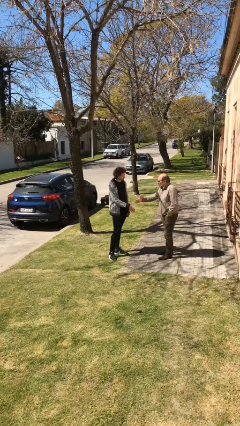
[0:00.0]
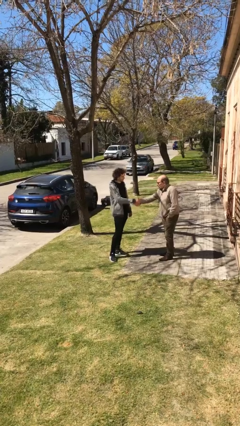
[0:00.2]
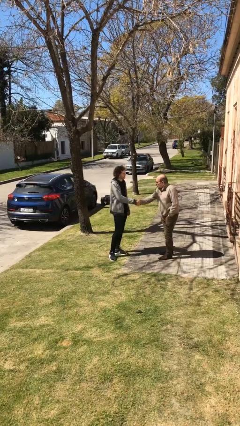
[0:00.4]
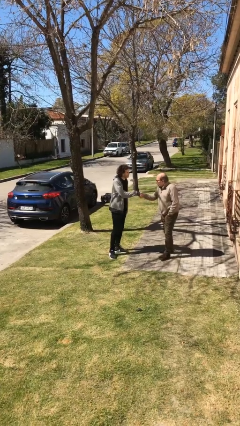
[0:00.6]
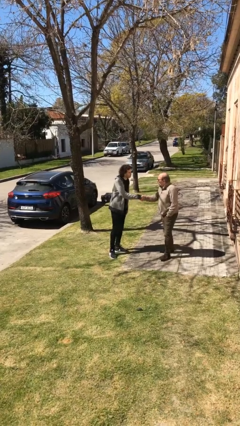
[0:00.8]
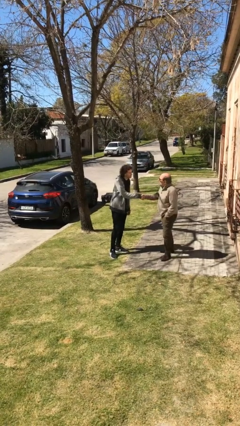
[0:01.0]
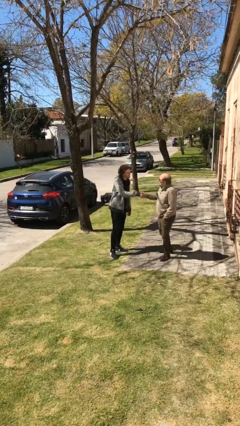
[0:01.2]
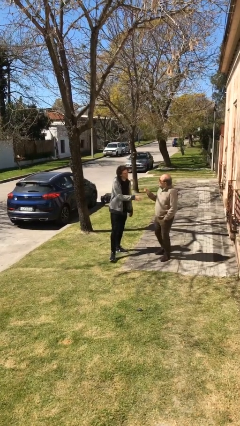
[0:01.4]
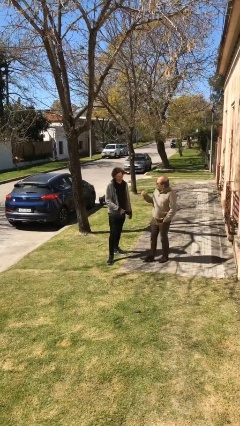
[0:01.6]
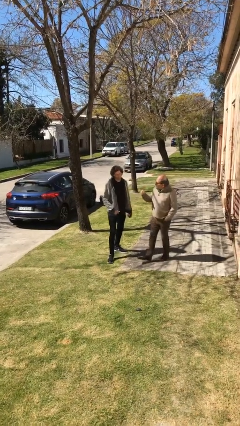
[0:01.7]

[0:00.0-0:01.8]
person shakes hand

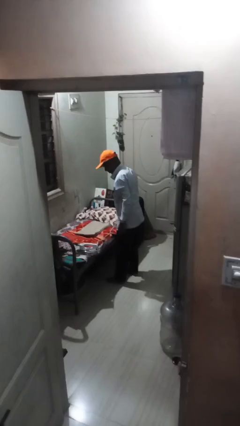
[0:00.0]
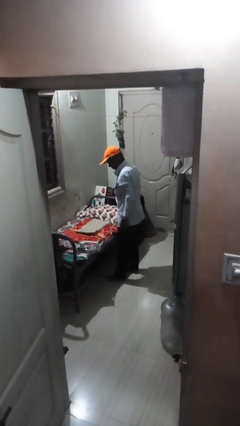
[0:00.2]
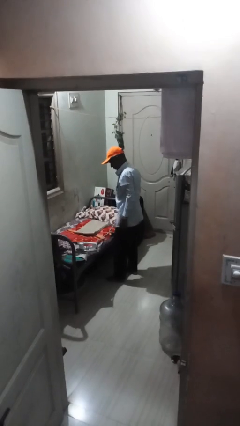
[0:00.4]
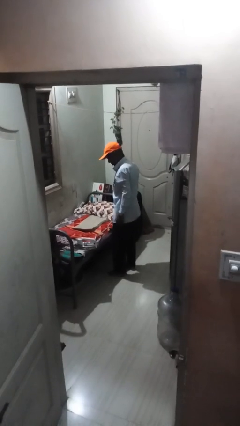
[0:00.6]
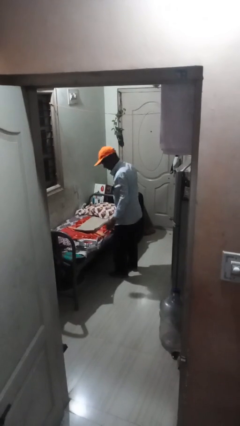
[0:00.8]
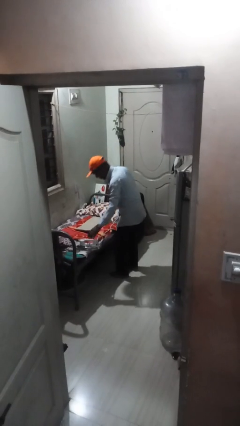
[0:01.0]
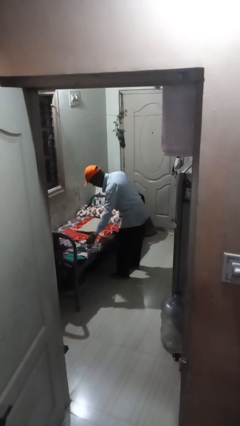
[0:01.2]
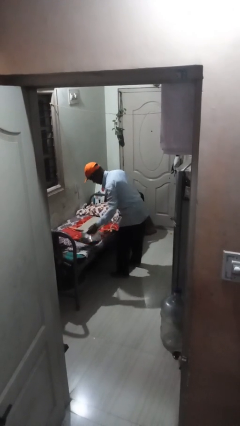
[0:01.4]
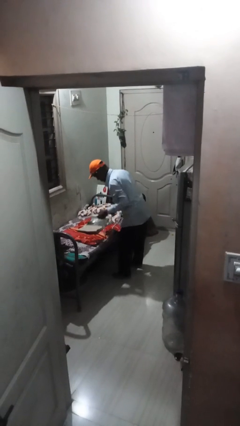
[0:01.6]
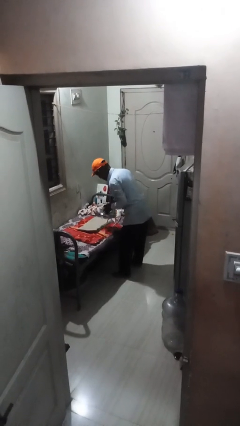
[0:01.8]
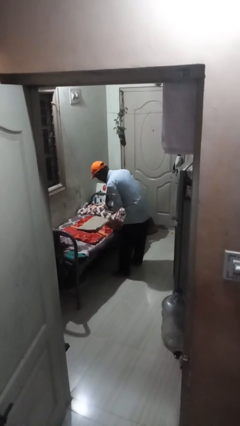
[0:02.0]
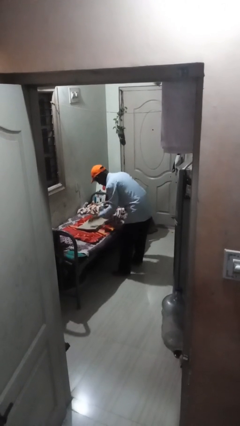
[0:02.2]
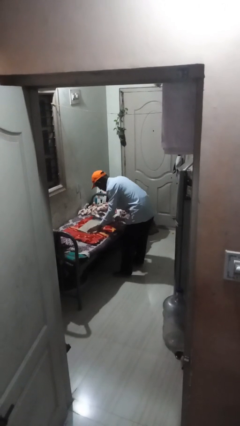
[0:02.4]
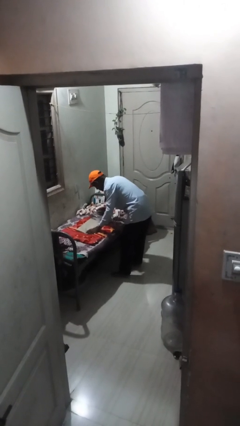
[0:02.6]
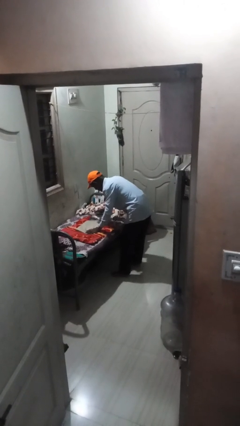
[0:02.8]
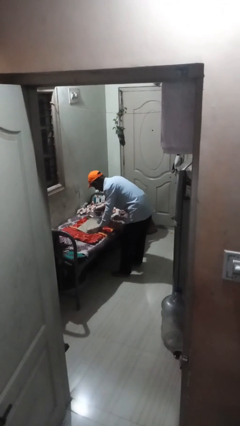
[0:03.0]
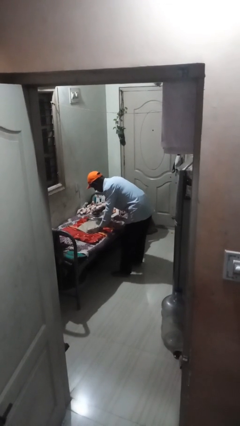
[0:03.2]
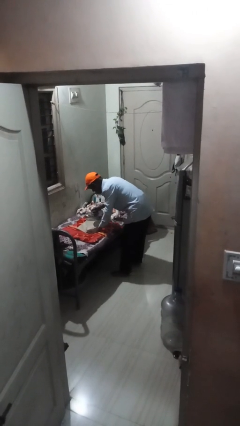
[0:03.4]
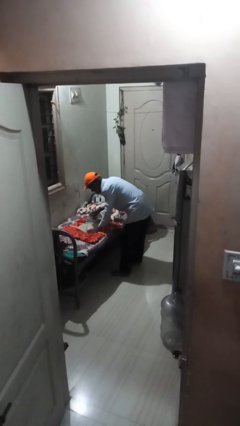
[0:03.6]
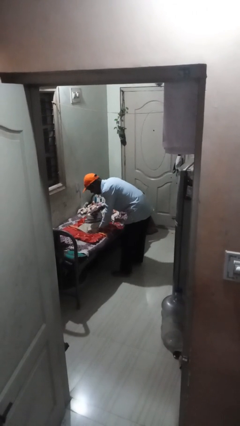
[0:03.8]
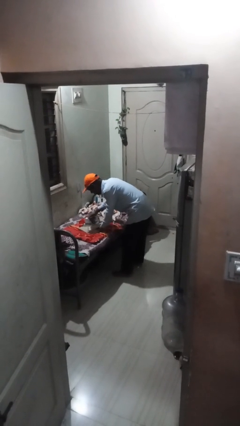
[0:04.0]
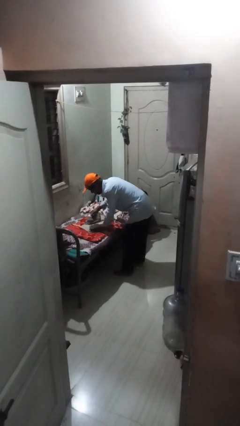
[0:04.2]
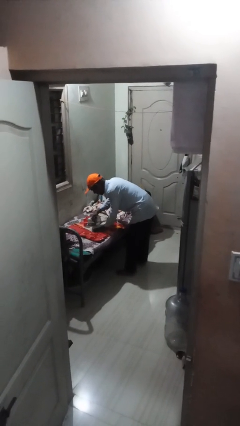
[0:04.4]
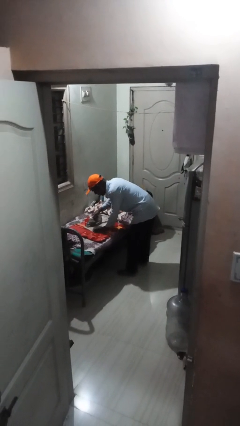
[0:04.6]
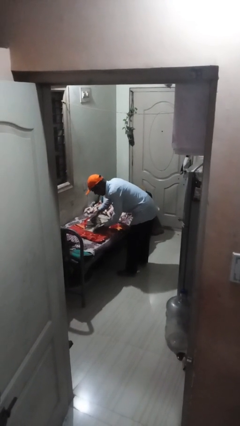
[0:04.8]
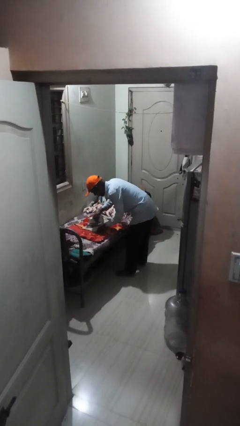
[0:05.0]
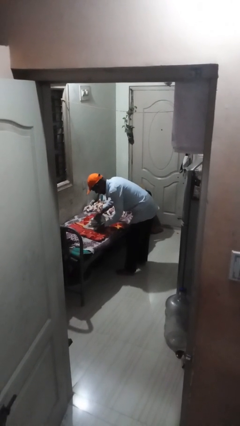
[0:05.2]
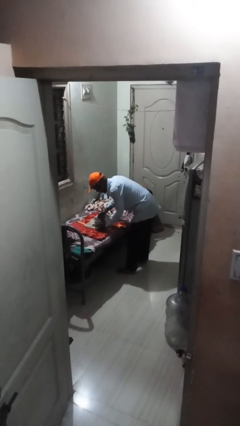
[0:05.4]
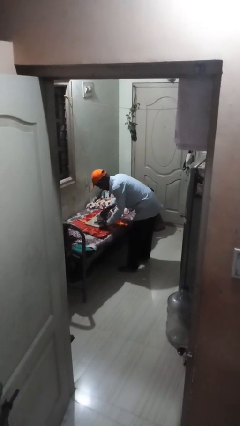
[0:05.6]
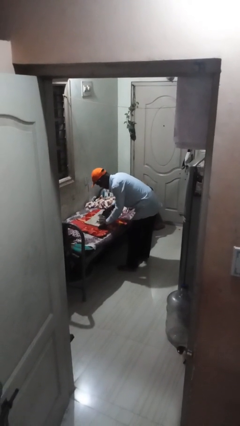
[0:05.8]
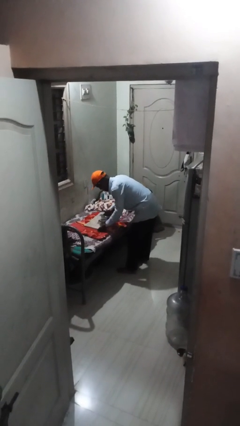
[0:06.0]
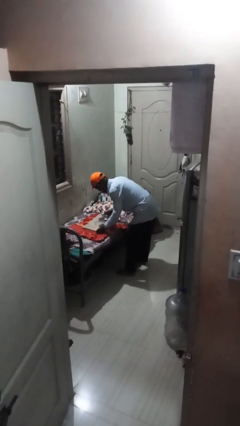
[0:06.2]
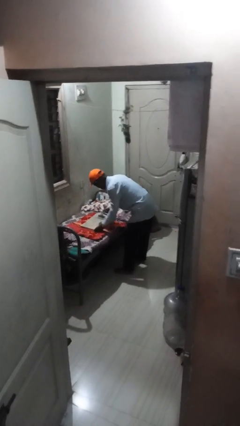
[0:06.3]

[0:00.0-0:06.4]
person irons clothes

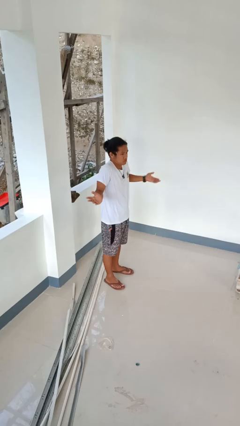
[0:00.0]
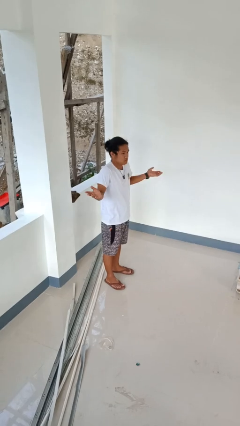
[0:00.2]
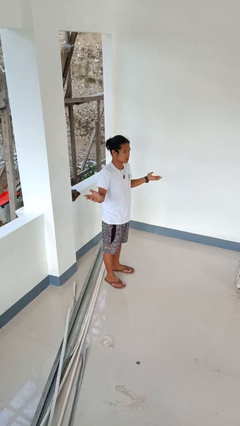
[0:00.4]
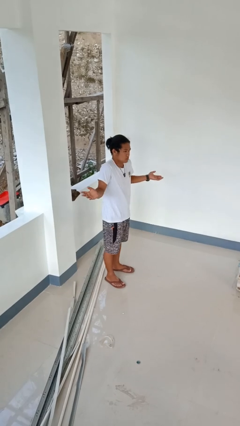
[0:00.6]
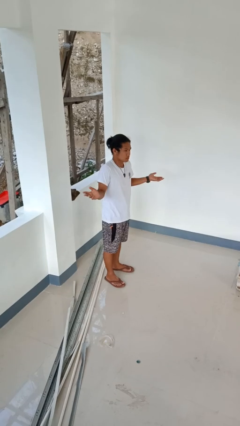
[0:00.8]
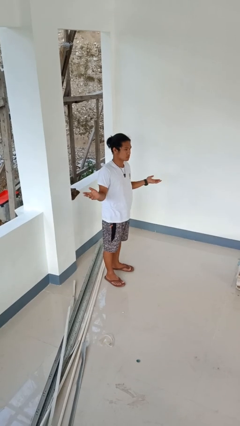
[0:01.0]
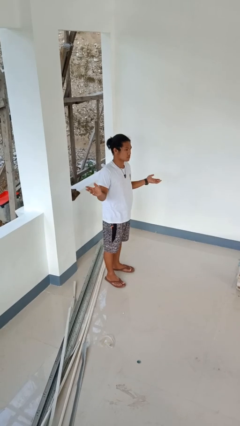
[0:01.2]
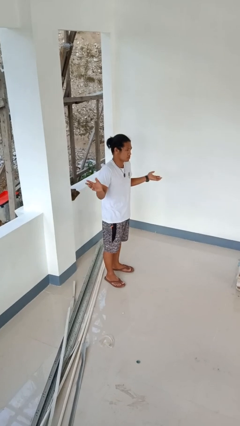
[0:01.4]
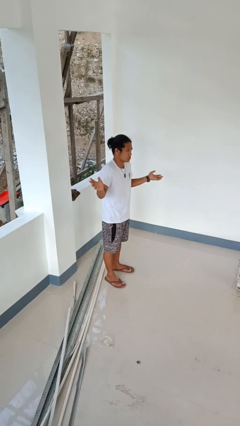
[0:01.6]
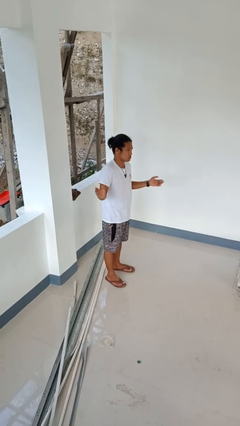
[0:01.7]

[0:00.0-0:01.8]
person shrugs

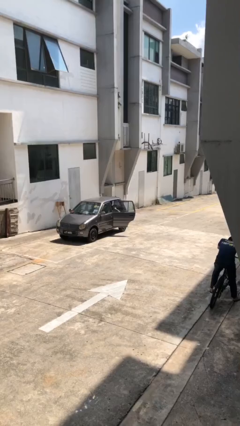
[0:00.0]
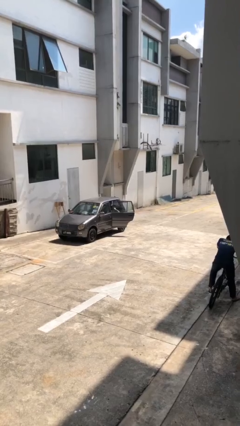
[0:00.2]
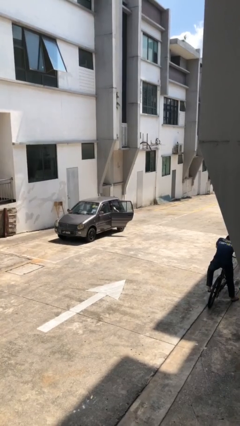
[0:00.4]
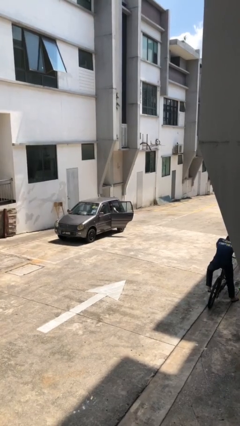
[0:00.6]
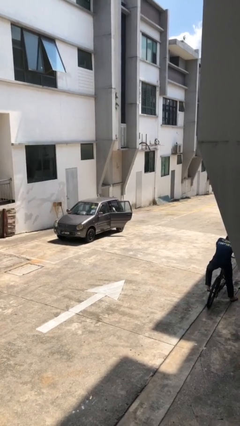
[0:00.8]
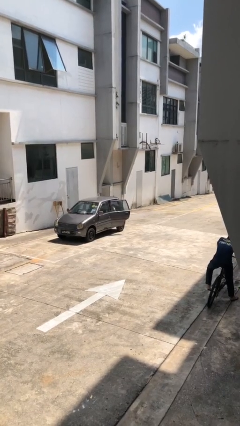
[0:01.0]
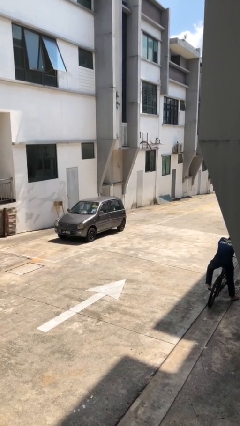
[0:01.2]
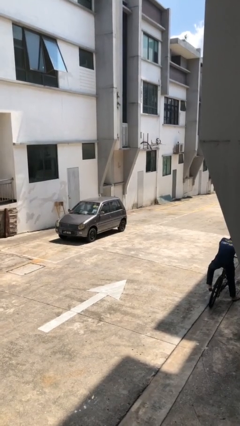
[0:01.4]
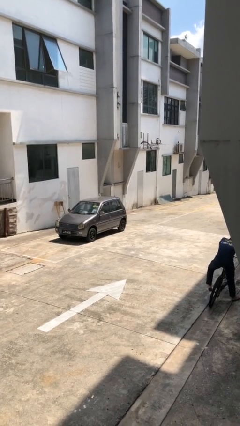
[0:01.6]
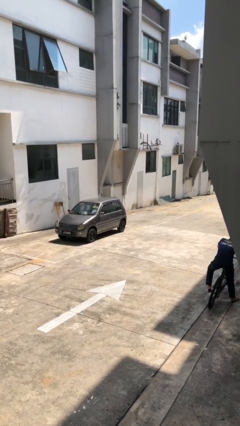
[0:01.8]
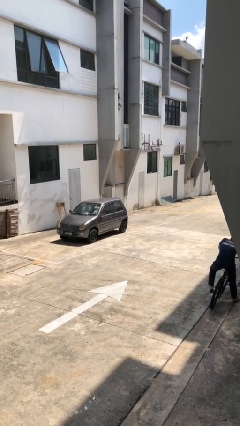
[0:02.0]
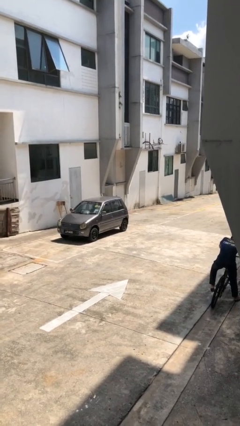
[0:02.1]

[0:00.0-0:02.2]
person closes car door

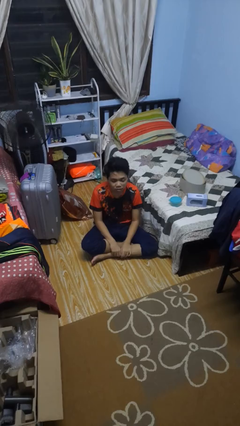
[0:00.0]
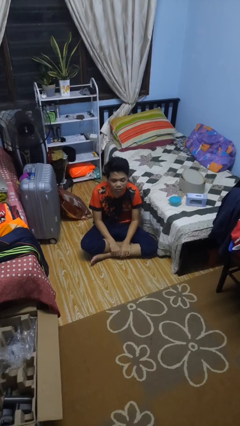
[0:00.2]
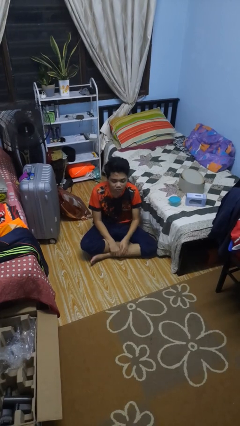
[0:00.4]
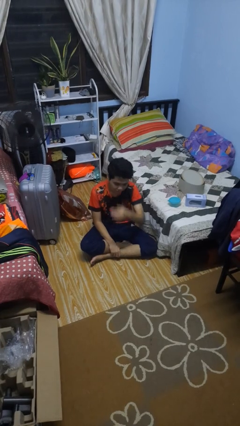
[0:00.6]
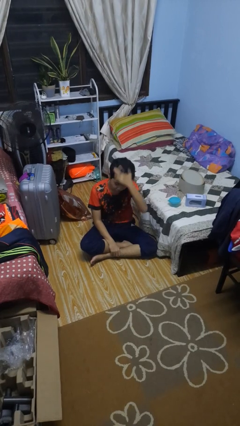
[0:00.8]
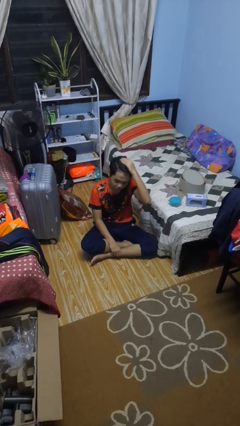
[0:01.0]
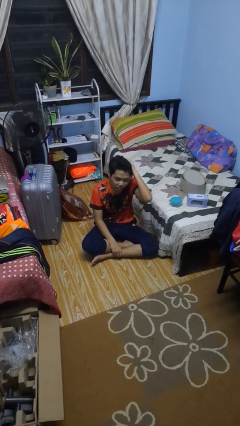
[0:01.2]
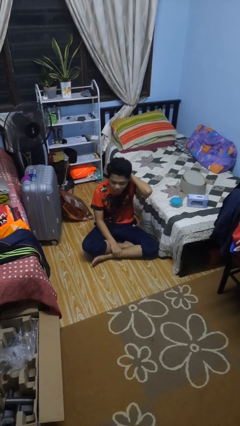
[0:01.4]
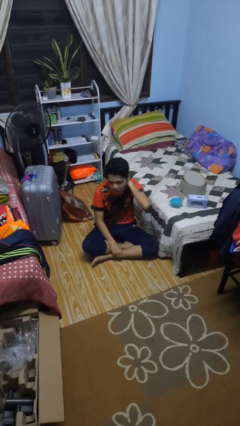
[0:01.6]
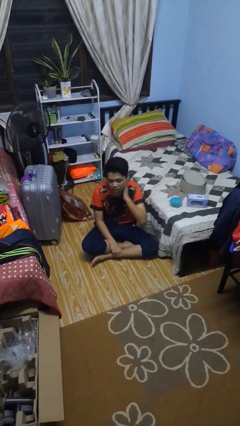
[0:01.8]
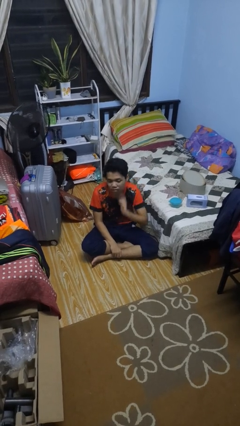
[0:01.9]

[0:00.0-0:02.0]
person strokes hair

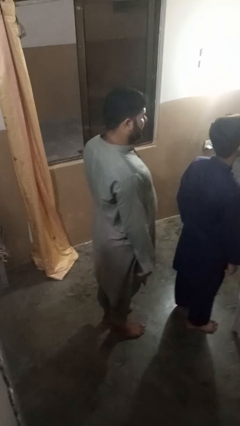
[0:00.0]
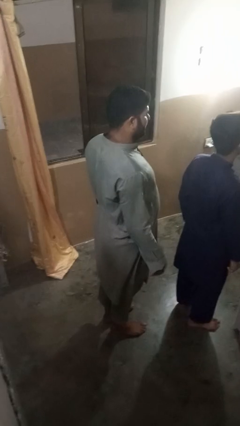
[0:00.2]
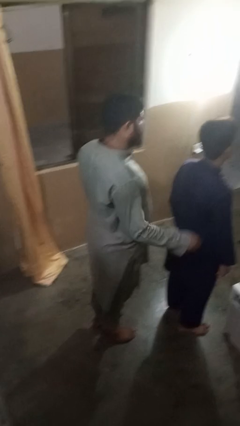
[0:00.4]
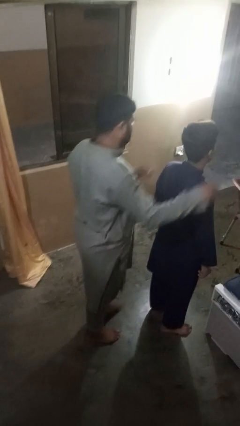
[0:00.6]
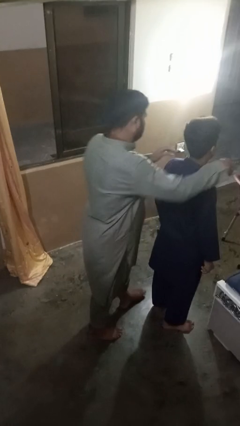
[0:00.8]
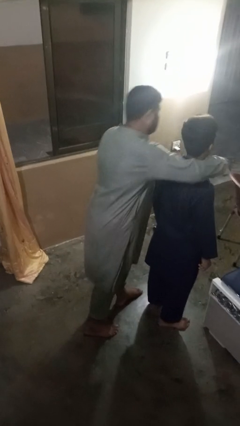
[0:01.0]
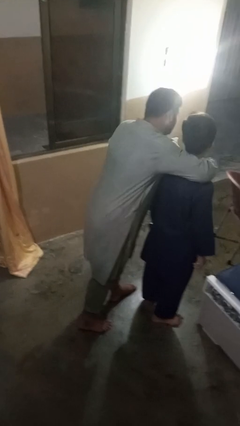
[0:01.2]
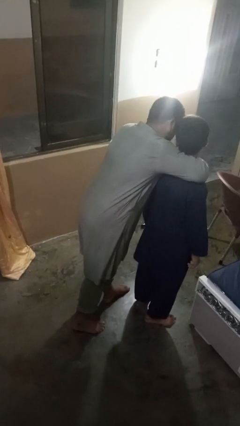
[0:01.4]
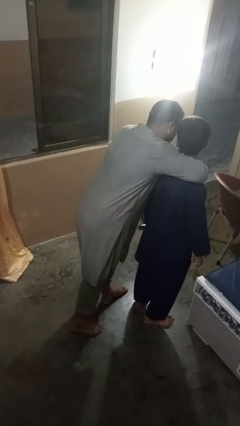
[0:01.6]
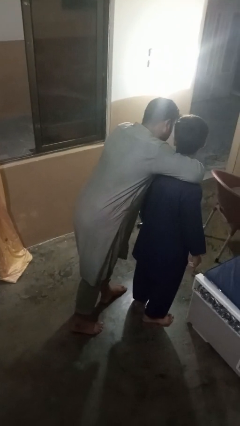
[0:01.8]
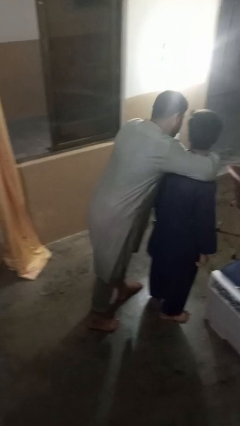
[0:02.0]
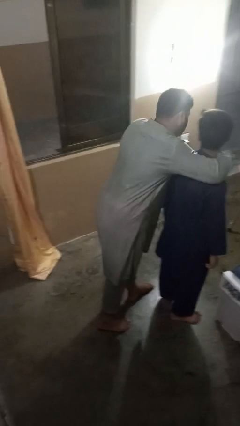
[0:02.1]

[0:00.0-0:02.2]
person hugs person from behind

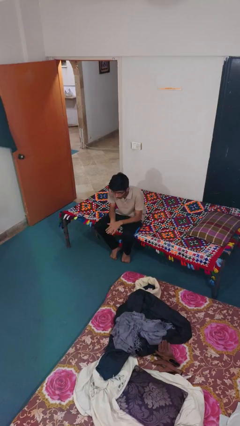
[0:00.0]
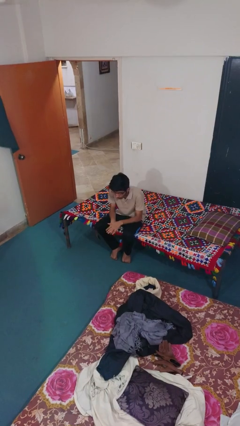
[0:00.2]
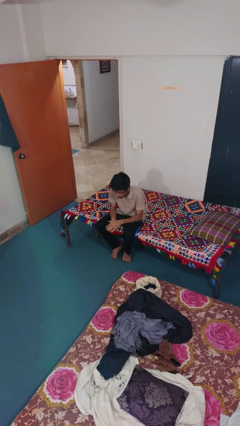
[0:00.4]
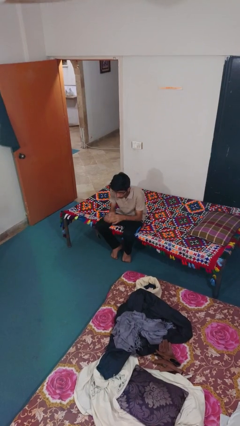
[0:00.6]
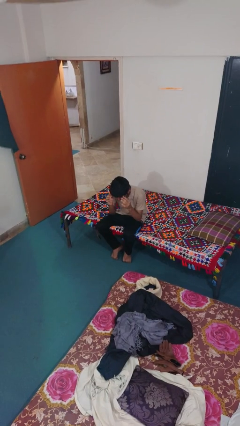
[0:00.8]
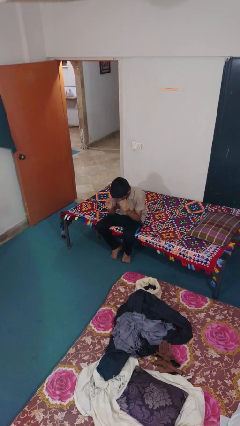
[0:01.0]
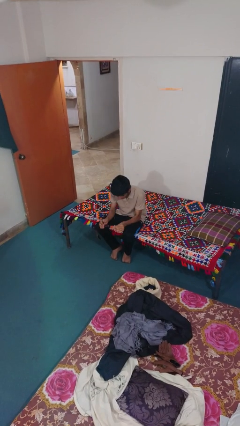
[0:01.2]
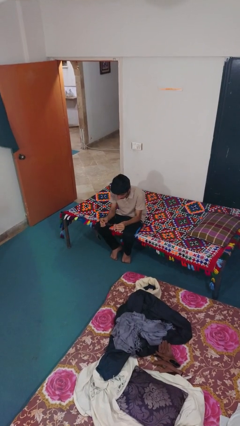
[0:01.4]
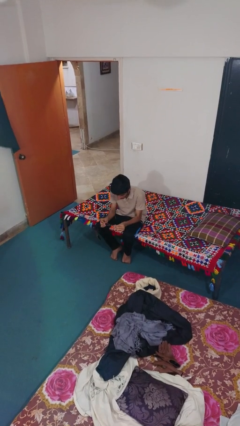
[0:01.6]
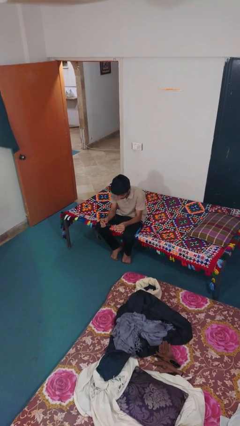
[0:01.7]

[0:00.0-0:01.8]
person takes off glasses
